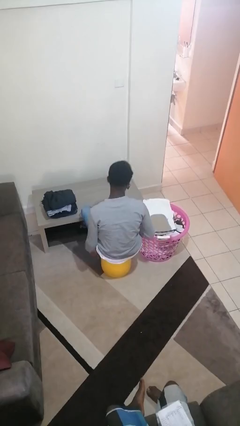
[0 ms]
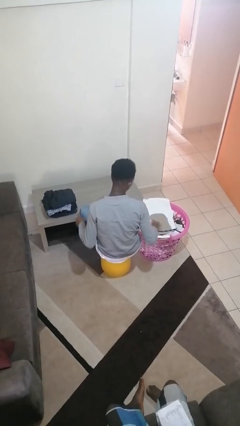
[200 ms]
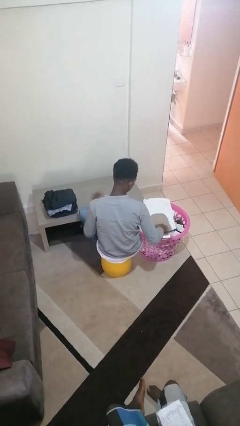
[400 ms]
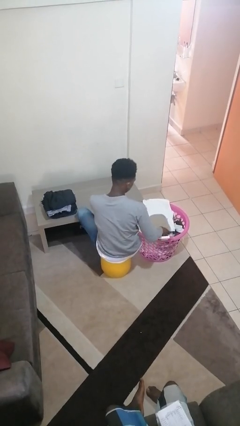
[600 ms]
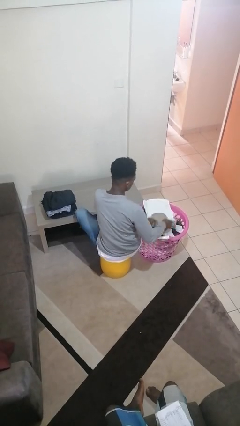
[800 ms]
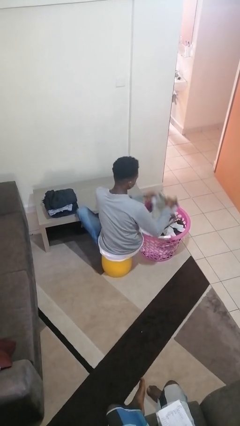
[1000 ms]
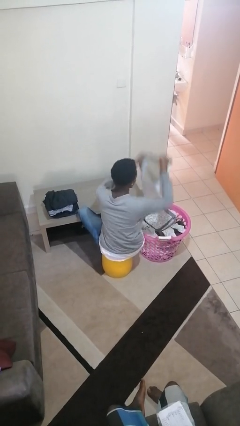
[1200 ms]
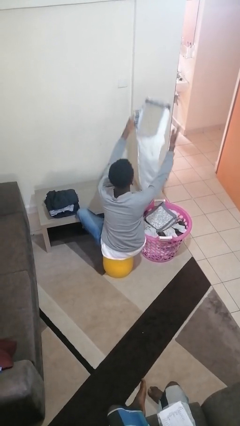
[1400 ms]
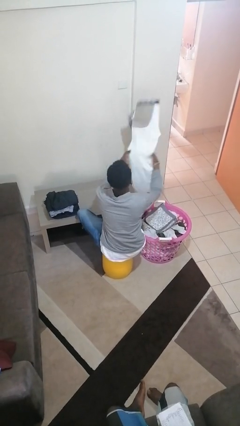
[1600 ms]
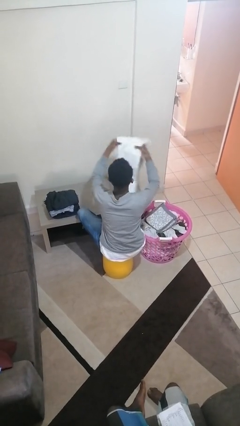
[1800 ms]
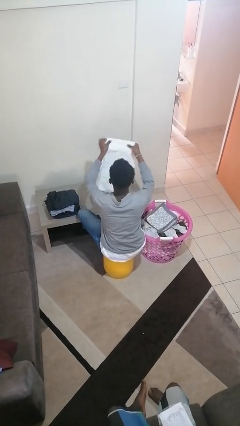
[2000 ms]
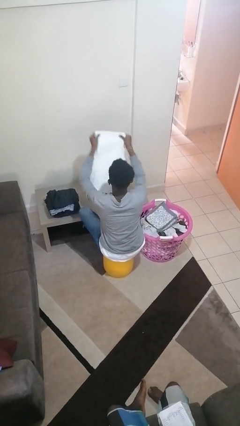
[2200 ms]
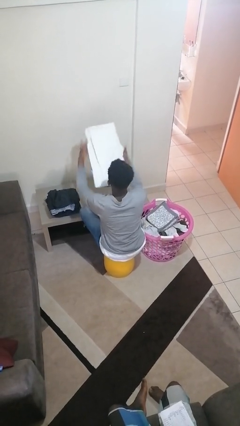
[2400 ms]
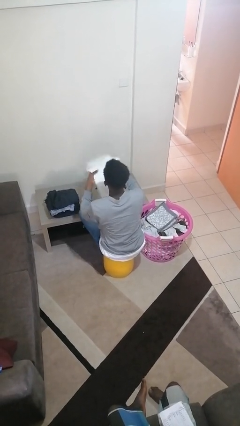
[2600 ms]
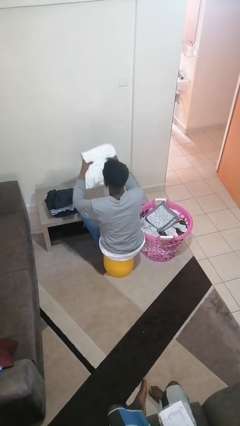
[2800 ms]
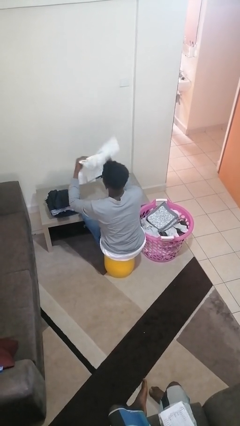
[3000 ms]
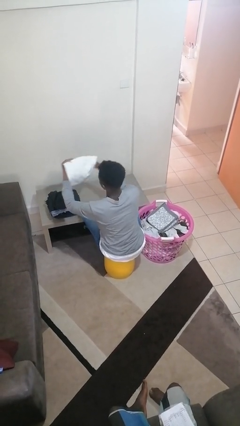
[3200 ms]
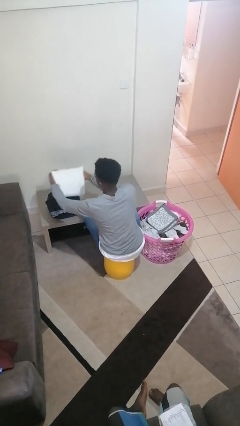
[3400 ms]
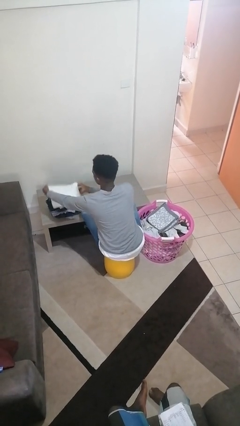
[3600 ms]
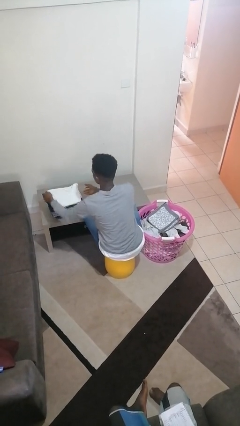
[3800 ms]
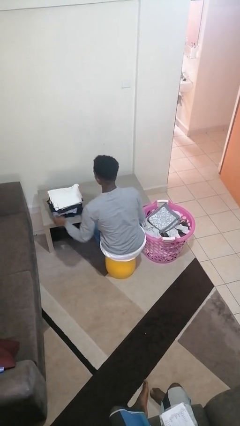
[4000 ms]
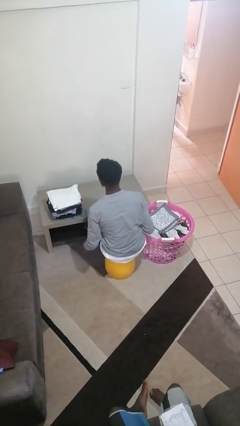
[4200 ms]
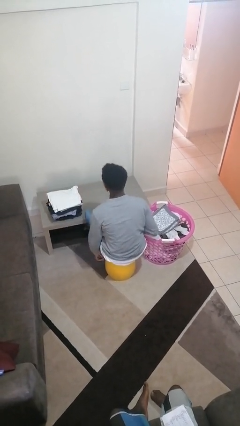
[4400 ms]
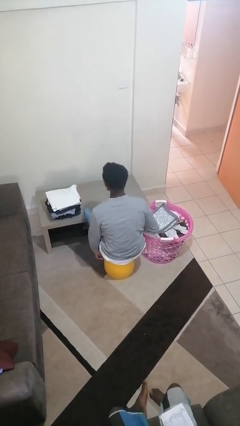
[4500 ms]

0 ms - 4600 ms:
person folds pants

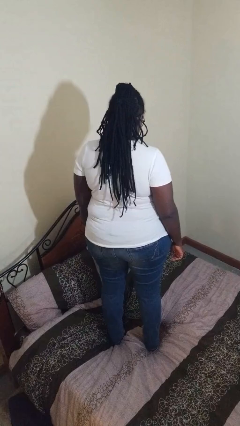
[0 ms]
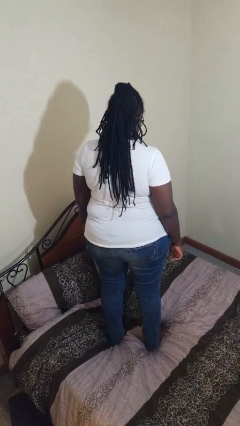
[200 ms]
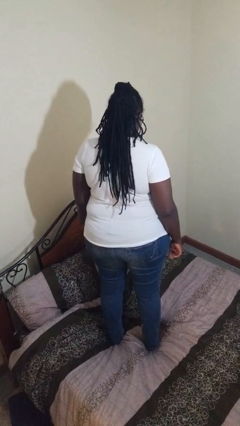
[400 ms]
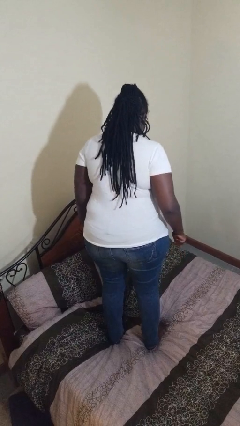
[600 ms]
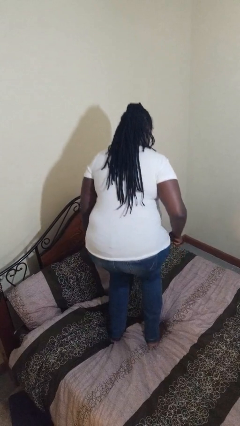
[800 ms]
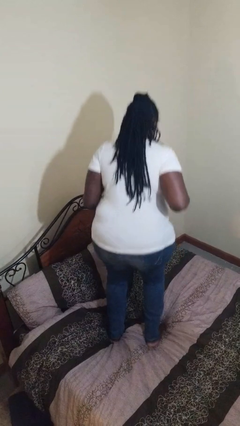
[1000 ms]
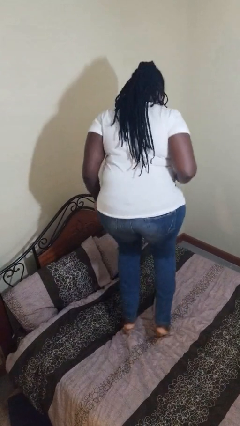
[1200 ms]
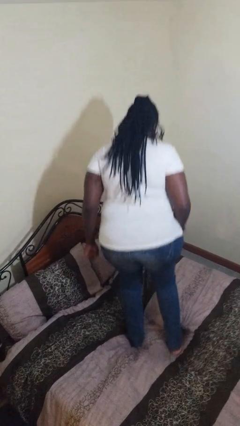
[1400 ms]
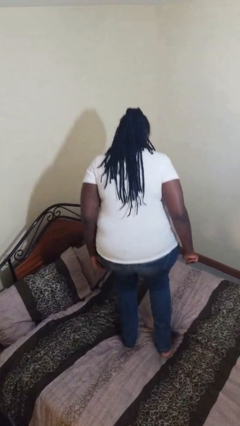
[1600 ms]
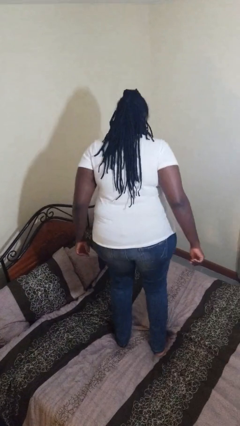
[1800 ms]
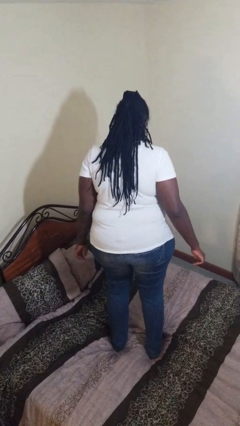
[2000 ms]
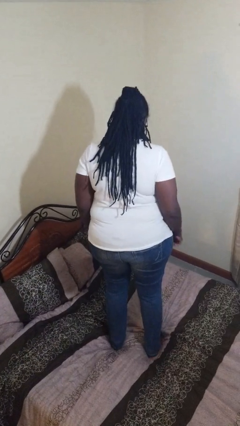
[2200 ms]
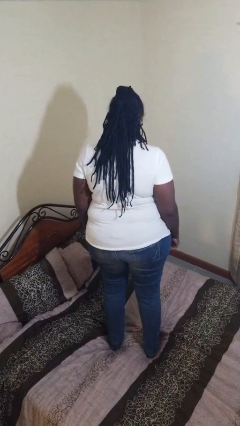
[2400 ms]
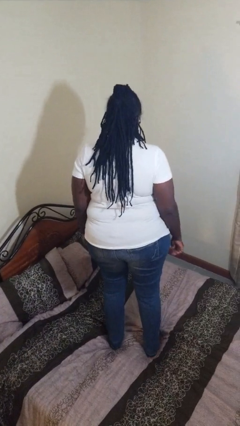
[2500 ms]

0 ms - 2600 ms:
person jumps on bed

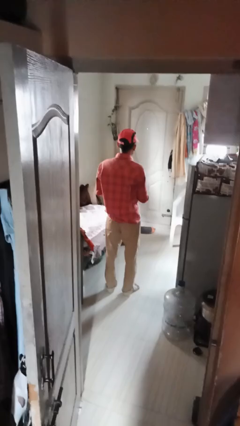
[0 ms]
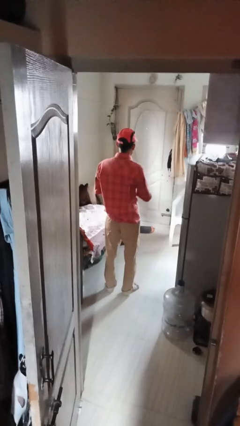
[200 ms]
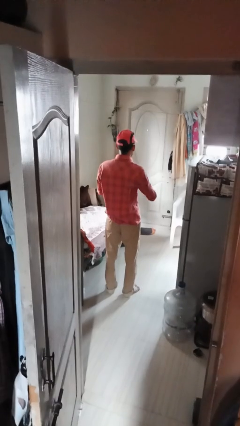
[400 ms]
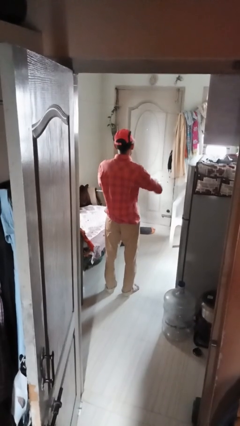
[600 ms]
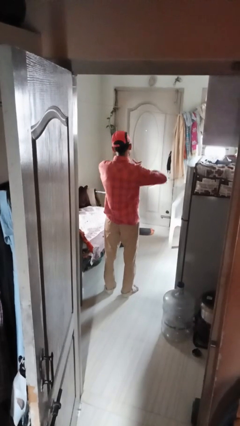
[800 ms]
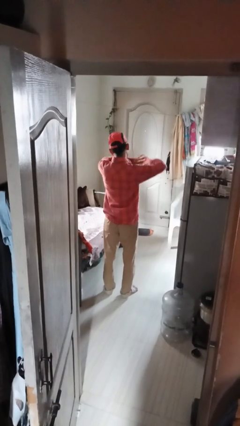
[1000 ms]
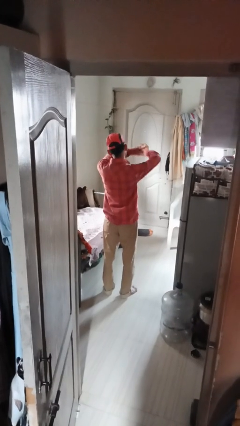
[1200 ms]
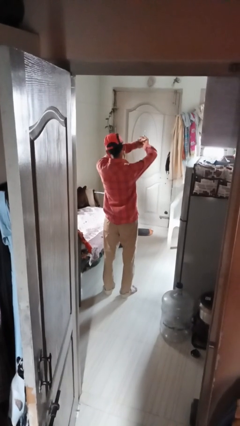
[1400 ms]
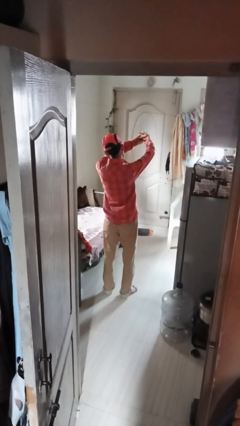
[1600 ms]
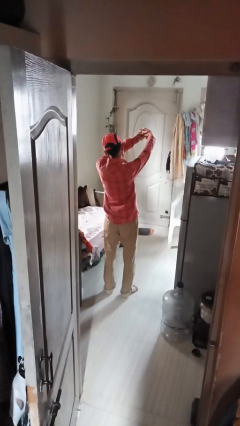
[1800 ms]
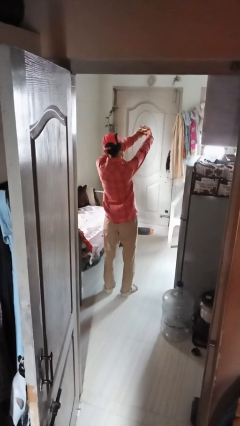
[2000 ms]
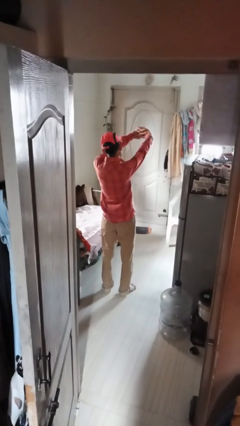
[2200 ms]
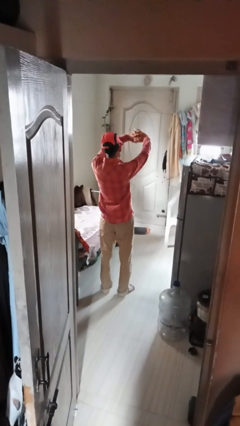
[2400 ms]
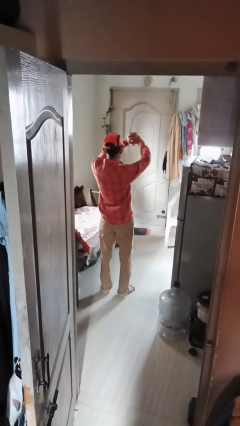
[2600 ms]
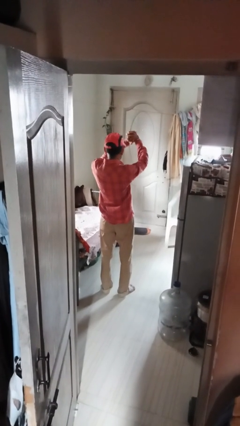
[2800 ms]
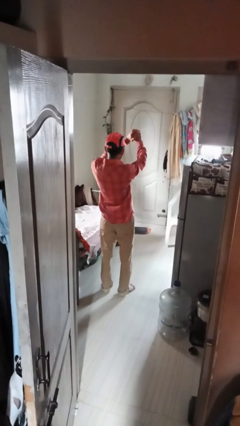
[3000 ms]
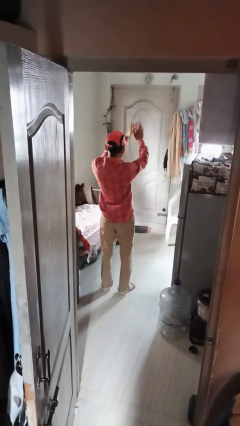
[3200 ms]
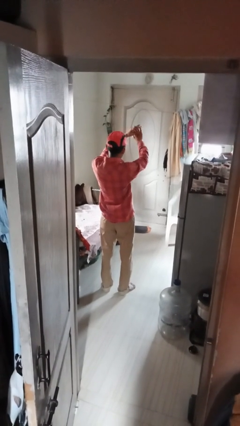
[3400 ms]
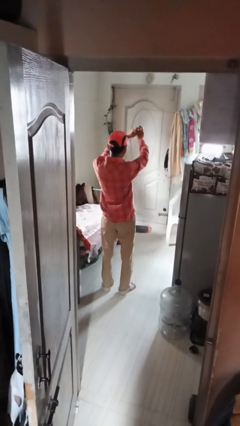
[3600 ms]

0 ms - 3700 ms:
person cracks knuckles

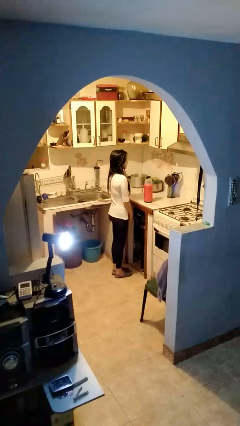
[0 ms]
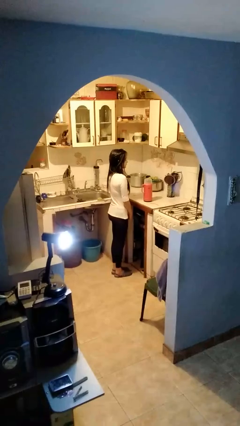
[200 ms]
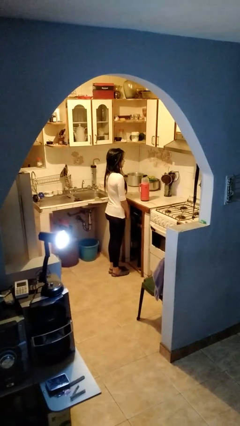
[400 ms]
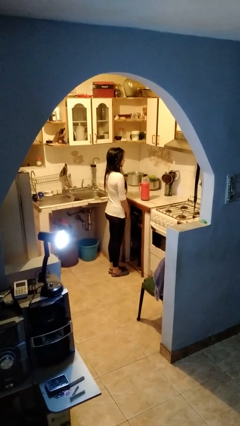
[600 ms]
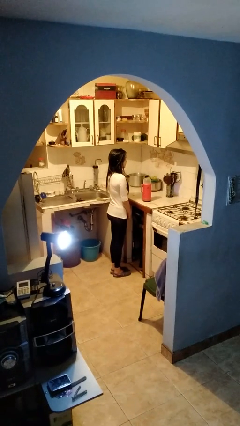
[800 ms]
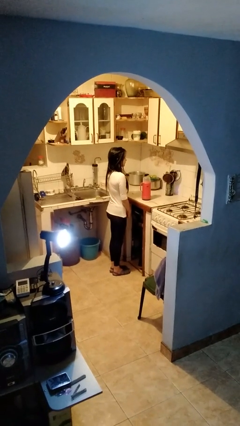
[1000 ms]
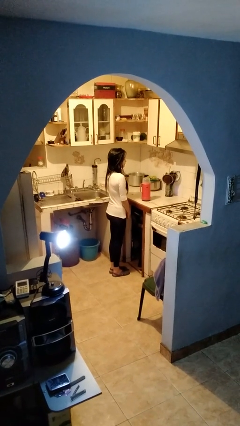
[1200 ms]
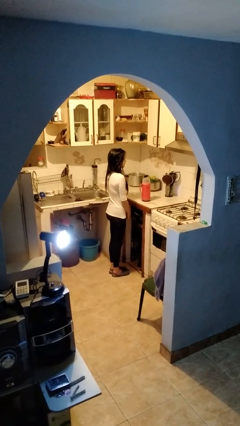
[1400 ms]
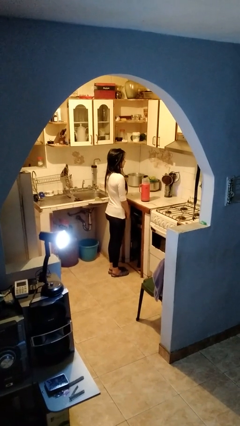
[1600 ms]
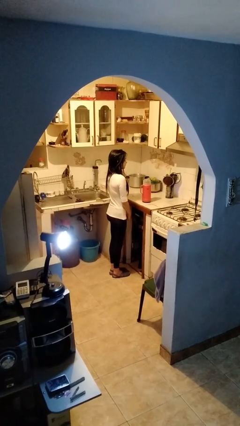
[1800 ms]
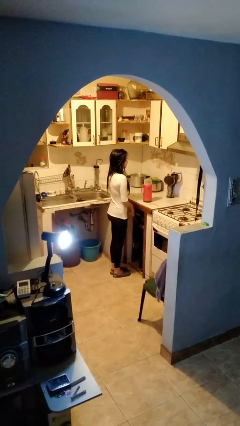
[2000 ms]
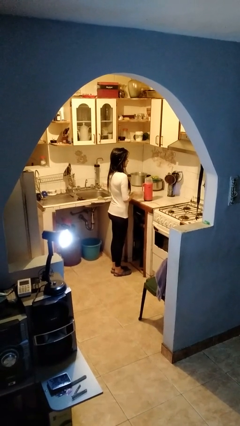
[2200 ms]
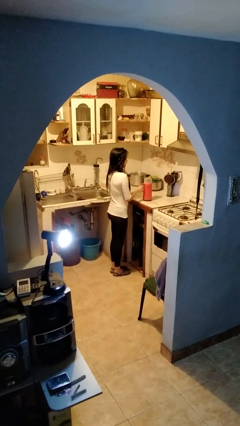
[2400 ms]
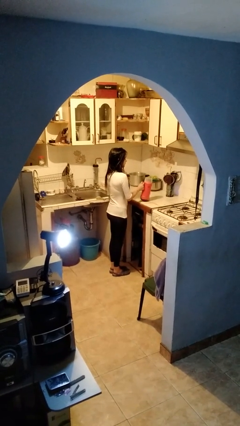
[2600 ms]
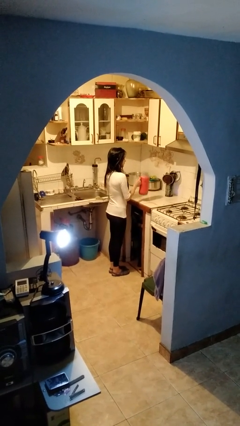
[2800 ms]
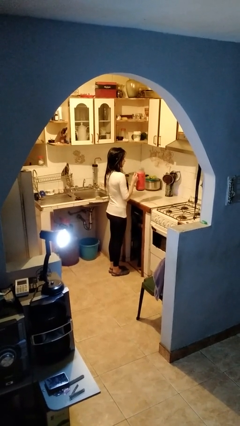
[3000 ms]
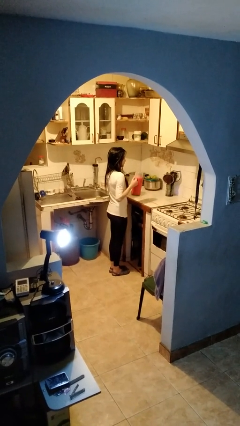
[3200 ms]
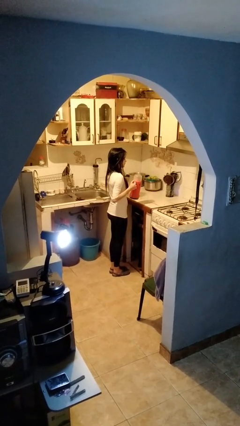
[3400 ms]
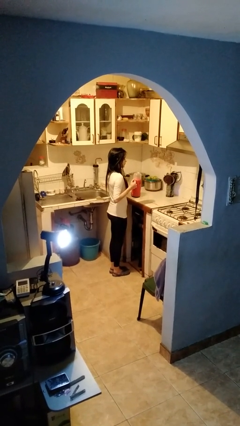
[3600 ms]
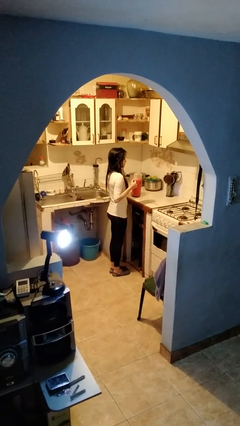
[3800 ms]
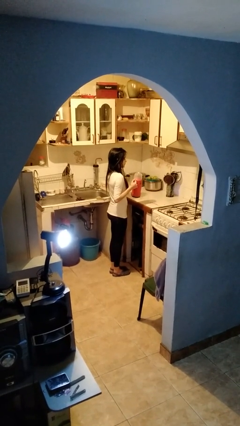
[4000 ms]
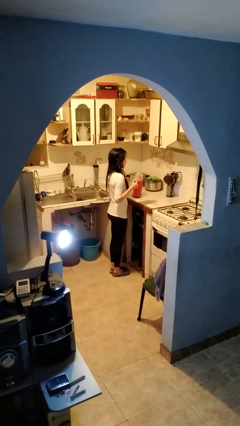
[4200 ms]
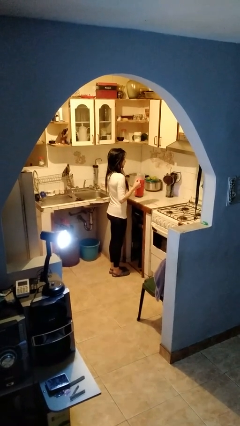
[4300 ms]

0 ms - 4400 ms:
person picks up object from countertop

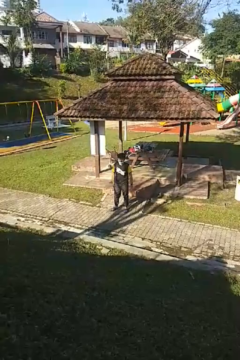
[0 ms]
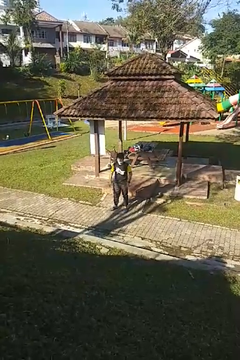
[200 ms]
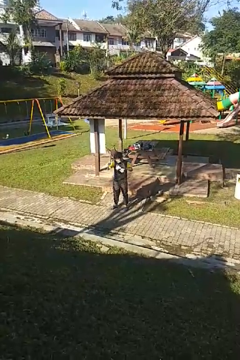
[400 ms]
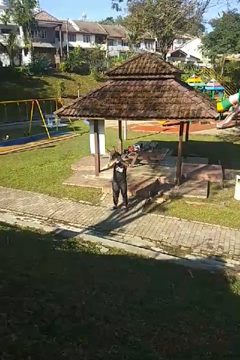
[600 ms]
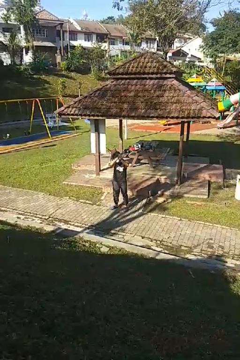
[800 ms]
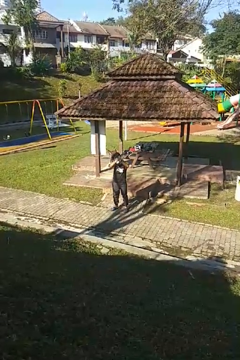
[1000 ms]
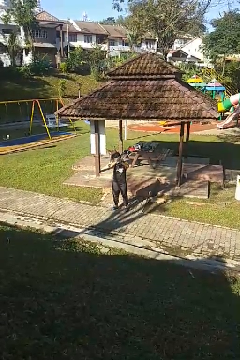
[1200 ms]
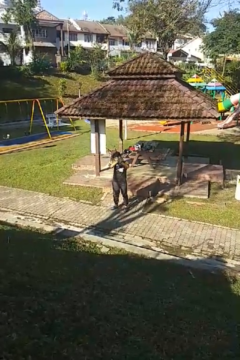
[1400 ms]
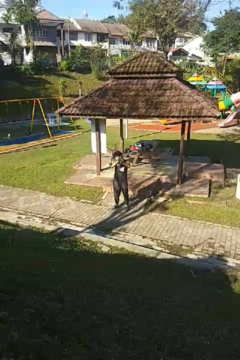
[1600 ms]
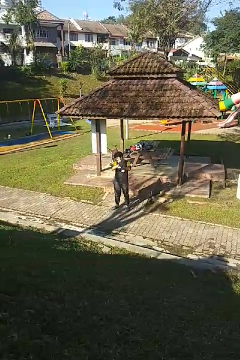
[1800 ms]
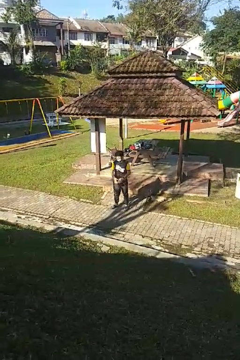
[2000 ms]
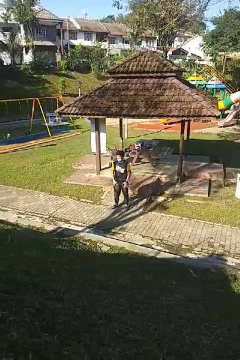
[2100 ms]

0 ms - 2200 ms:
person claps hands

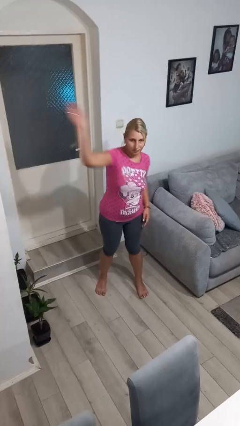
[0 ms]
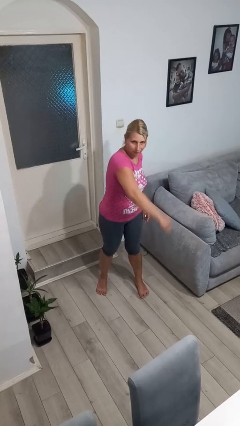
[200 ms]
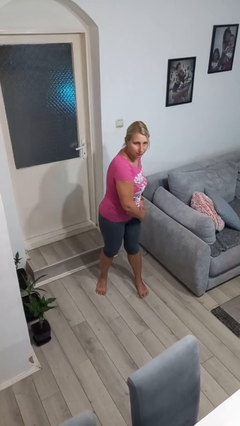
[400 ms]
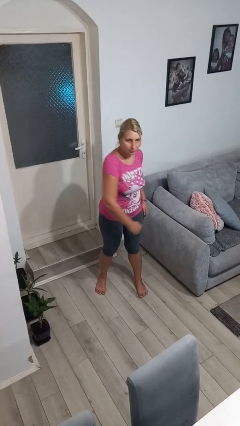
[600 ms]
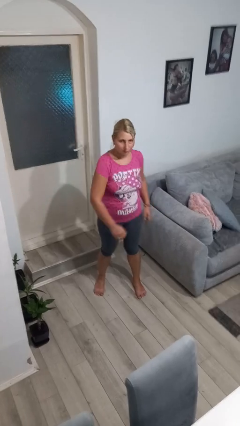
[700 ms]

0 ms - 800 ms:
person punches
